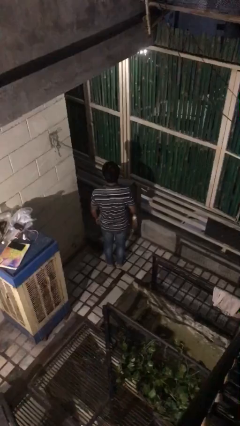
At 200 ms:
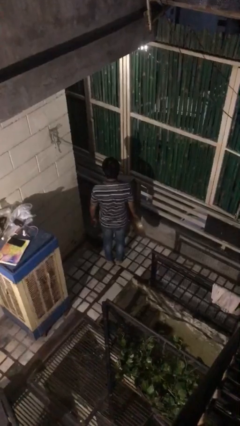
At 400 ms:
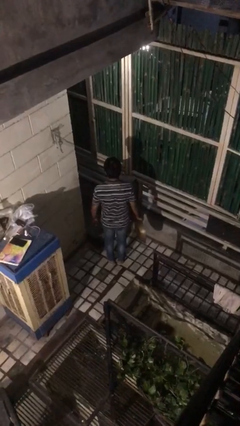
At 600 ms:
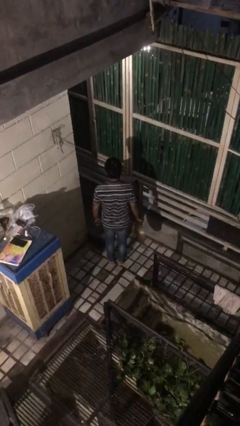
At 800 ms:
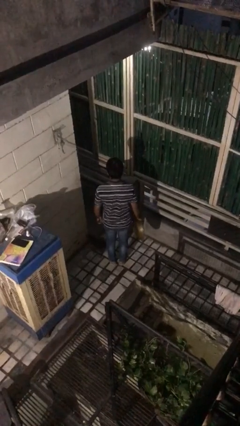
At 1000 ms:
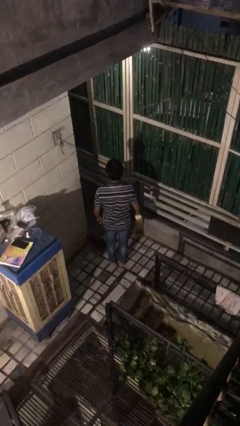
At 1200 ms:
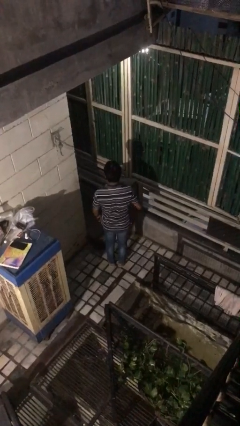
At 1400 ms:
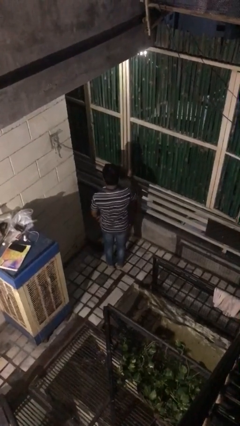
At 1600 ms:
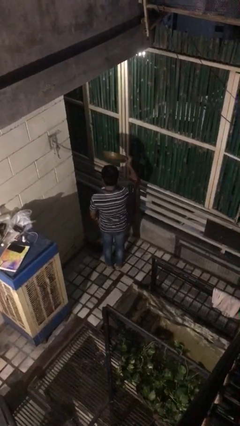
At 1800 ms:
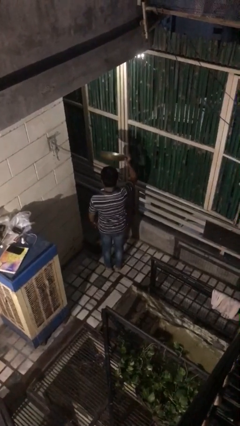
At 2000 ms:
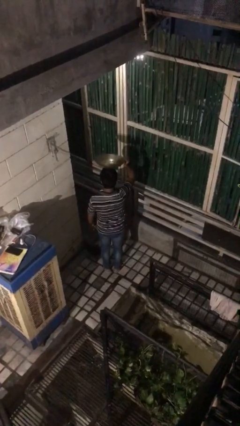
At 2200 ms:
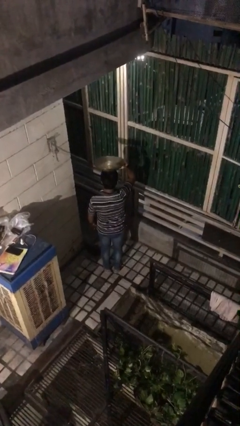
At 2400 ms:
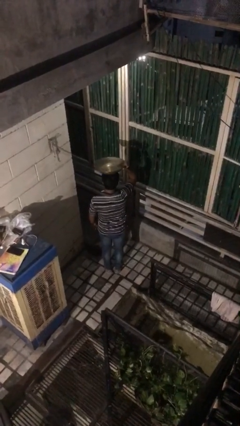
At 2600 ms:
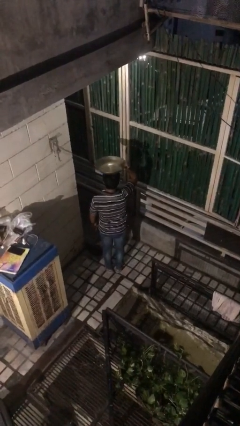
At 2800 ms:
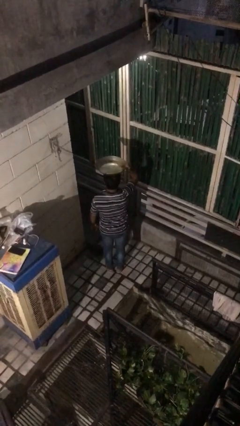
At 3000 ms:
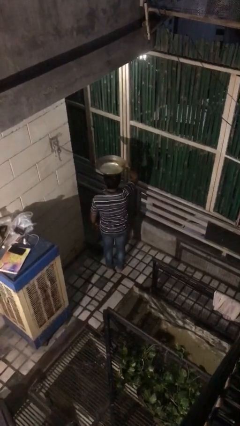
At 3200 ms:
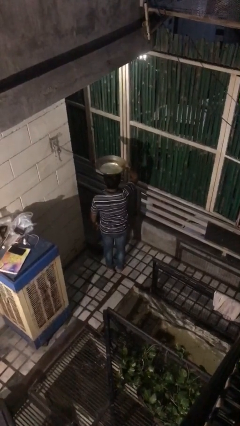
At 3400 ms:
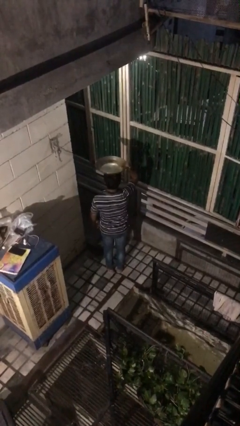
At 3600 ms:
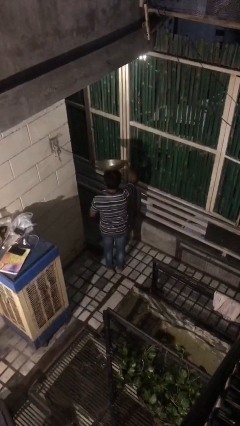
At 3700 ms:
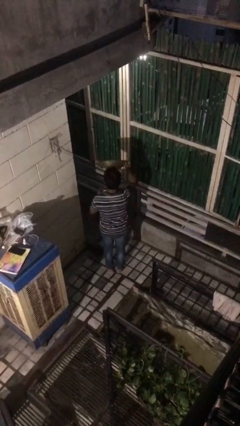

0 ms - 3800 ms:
person holds object above head

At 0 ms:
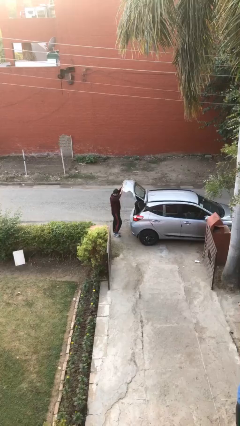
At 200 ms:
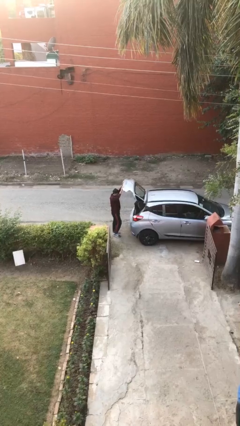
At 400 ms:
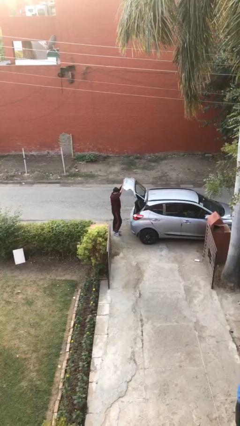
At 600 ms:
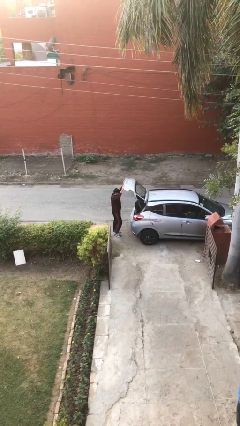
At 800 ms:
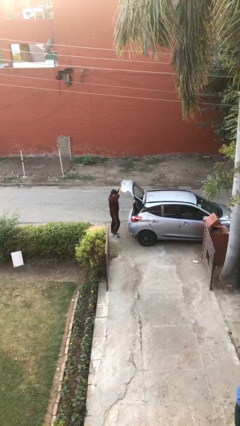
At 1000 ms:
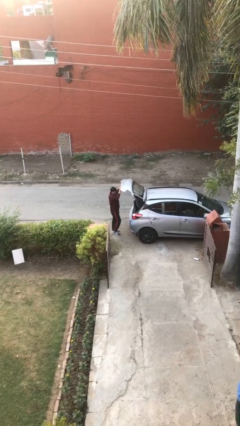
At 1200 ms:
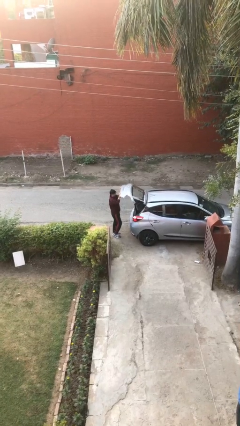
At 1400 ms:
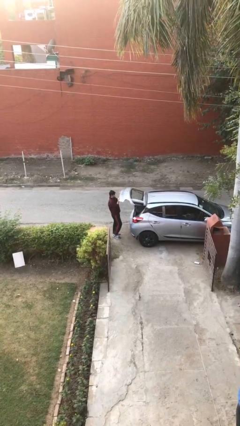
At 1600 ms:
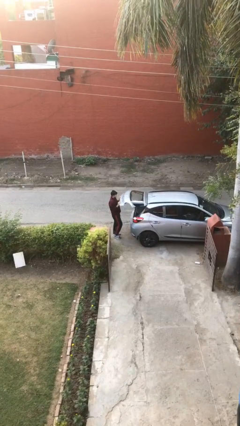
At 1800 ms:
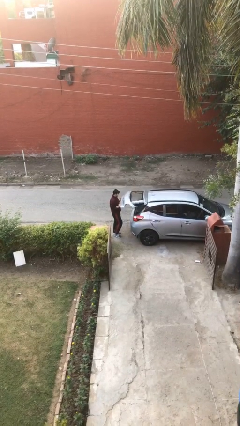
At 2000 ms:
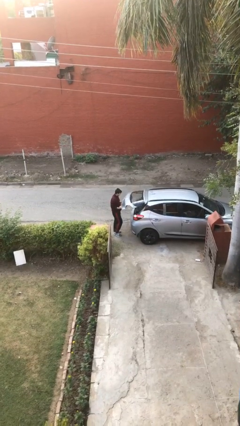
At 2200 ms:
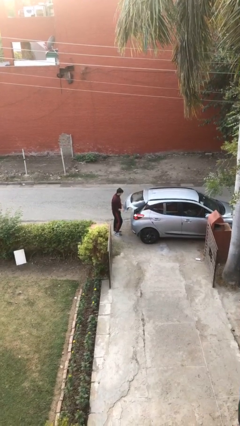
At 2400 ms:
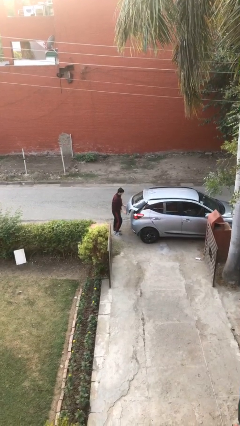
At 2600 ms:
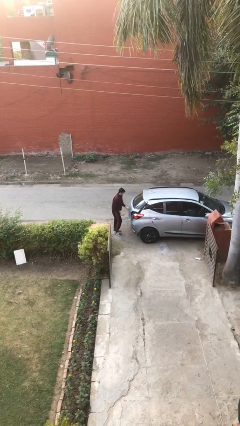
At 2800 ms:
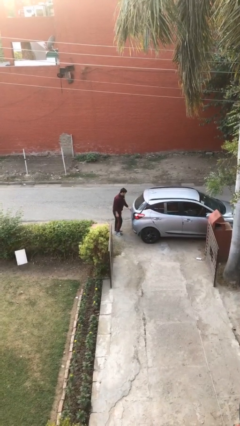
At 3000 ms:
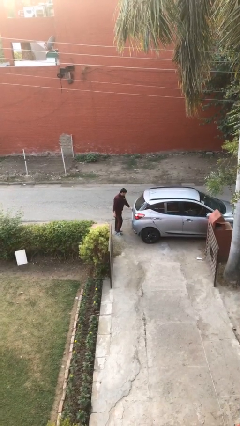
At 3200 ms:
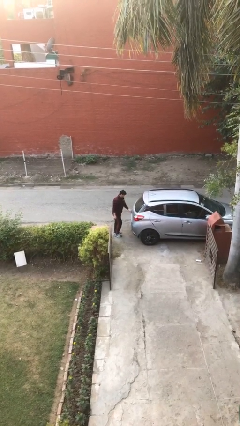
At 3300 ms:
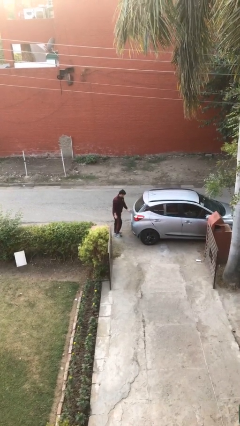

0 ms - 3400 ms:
person closes car trunk

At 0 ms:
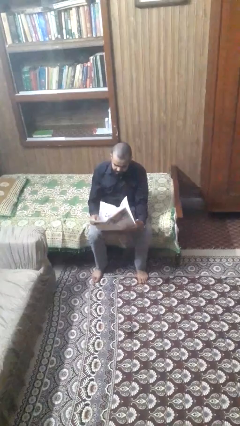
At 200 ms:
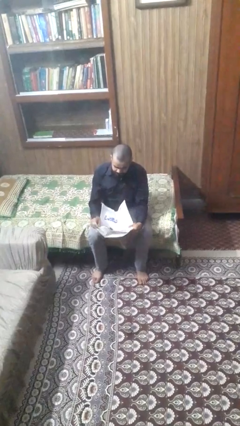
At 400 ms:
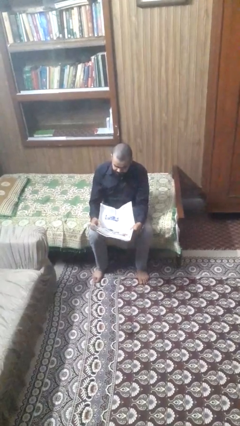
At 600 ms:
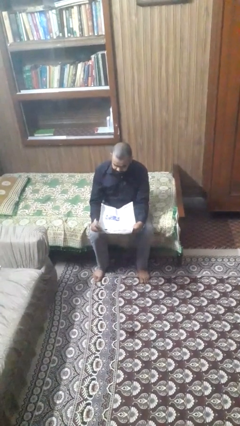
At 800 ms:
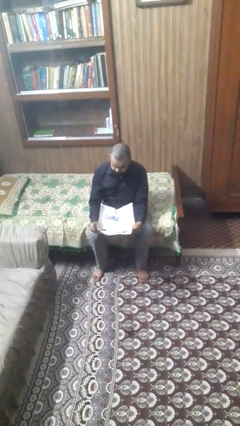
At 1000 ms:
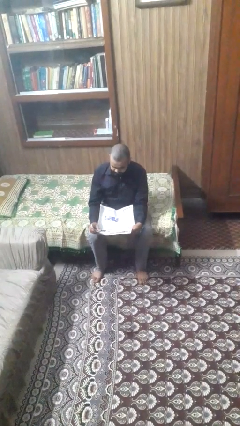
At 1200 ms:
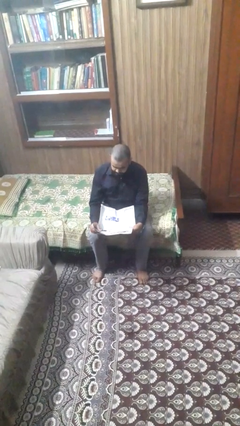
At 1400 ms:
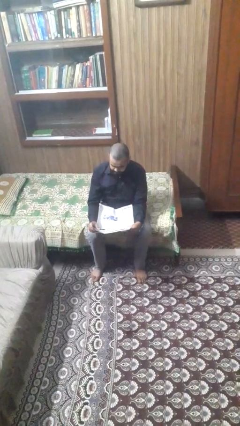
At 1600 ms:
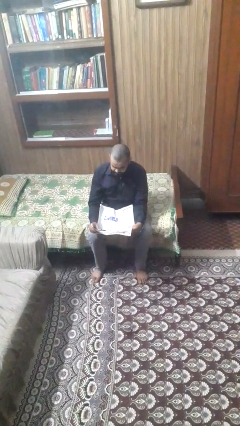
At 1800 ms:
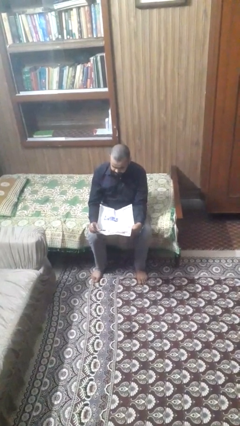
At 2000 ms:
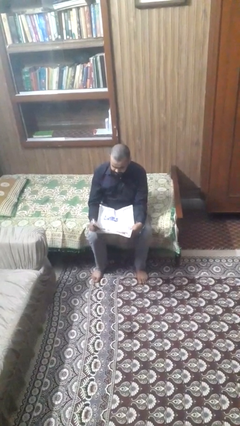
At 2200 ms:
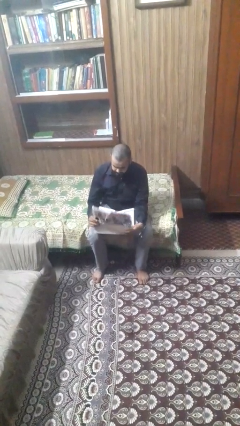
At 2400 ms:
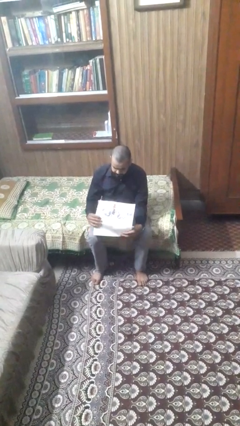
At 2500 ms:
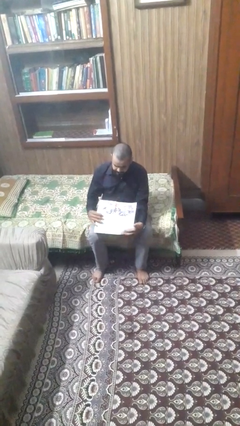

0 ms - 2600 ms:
person reads newspaper

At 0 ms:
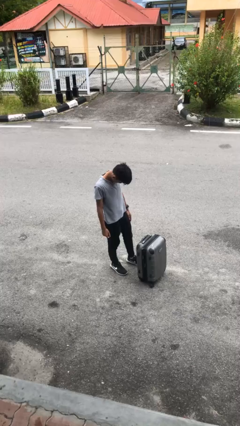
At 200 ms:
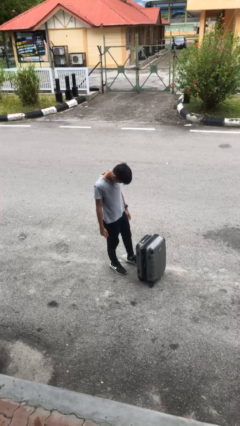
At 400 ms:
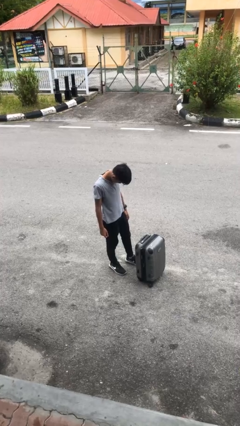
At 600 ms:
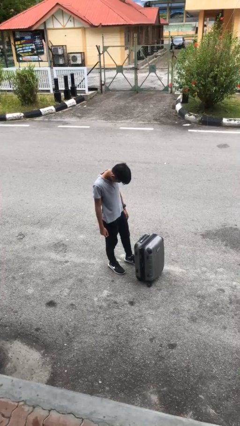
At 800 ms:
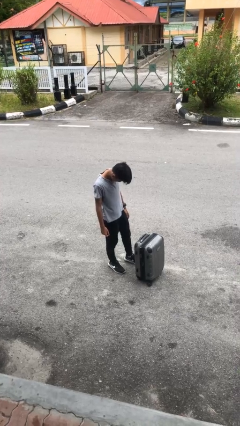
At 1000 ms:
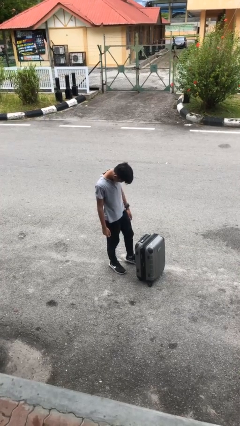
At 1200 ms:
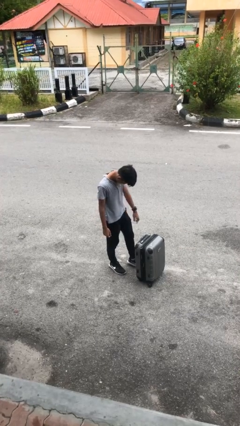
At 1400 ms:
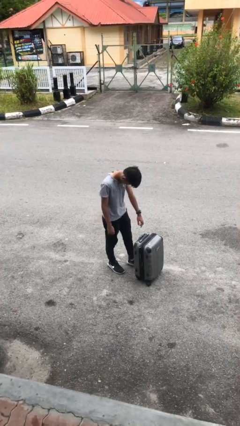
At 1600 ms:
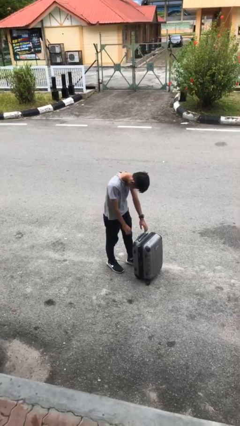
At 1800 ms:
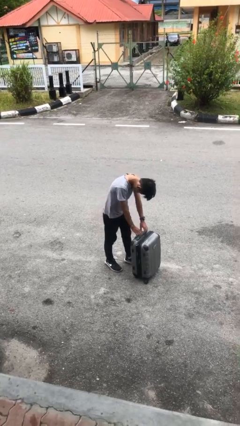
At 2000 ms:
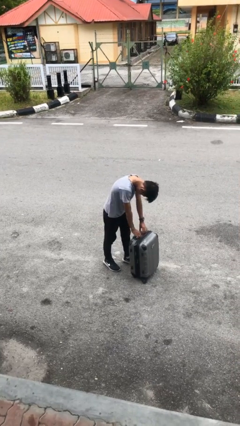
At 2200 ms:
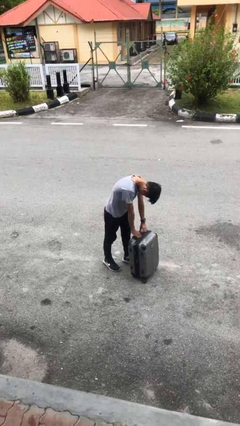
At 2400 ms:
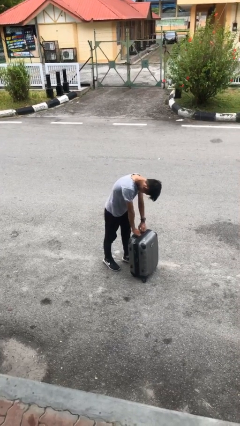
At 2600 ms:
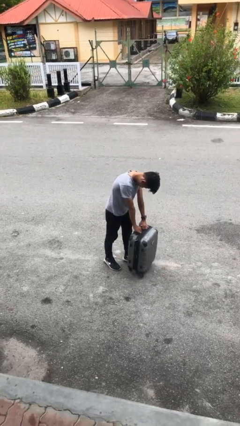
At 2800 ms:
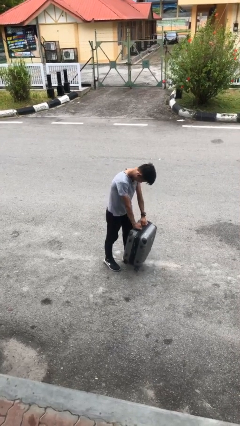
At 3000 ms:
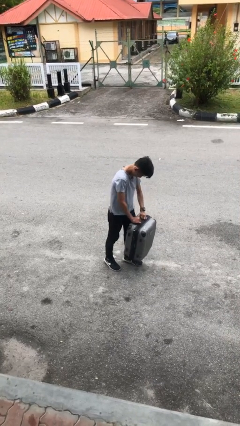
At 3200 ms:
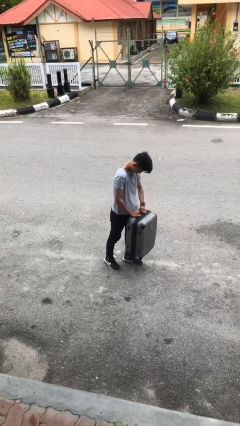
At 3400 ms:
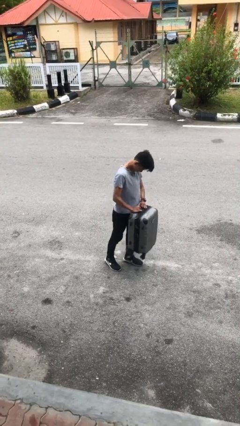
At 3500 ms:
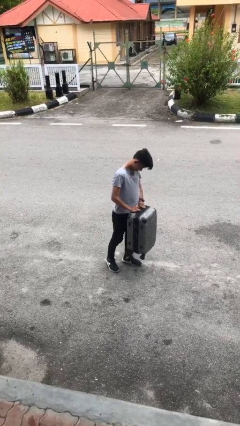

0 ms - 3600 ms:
person picks up object from floor

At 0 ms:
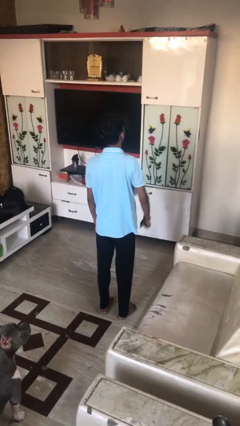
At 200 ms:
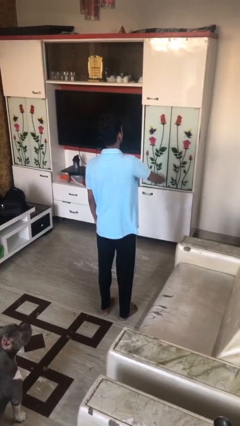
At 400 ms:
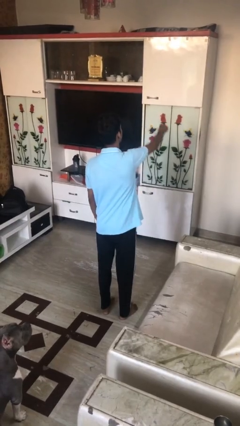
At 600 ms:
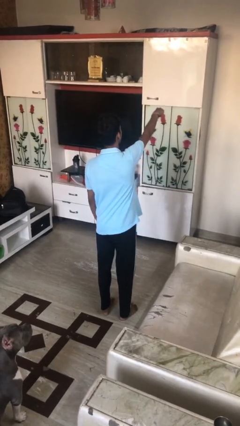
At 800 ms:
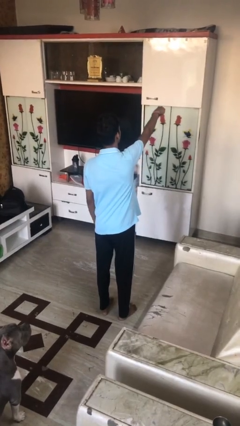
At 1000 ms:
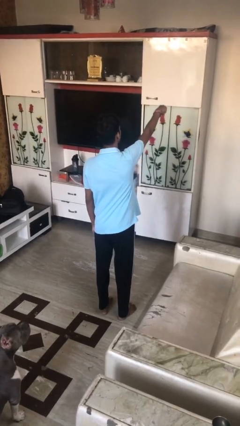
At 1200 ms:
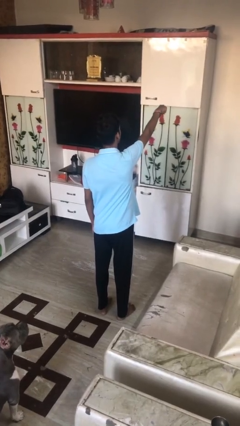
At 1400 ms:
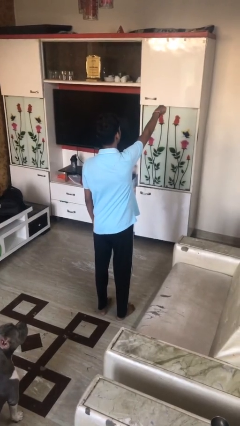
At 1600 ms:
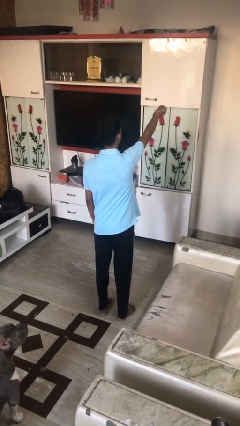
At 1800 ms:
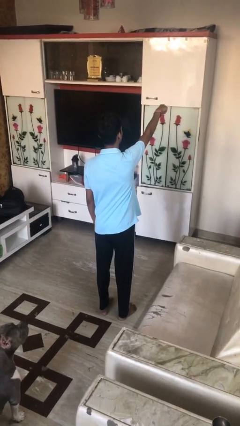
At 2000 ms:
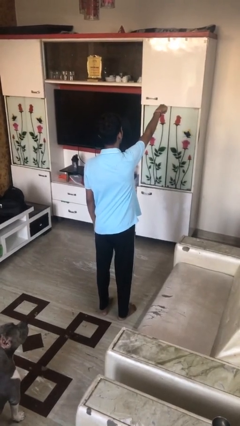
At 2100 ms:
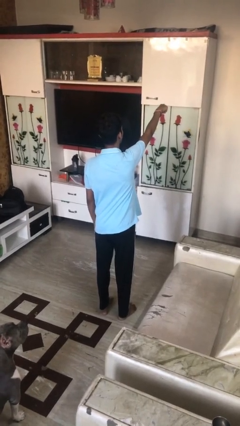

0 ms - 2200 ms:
person points at person

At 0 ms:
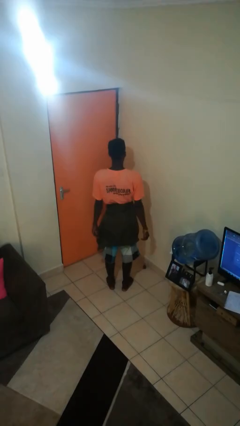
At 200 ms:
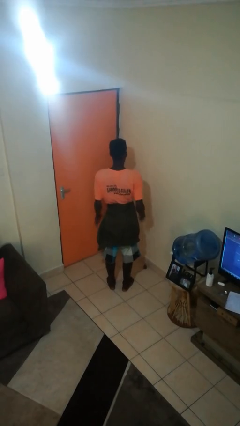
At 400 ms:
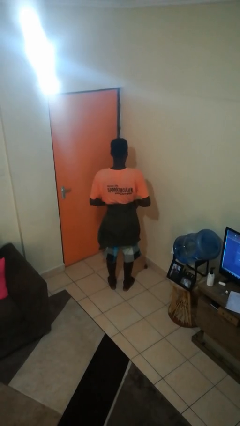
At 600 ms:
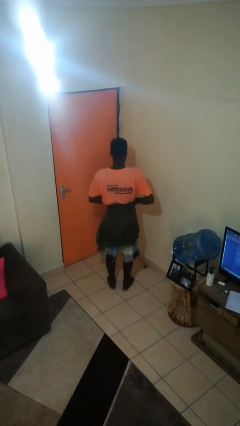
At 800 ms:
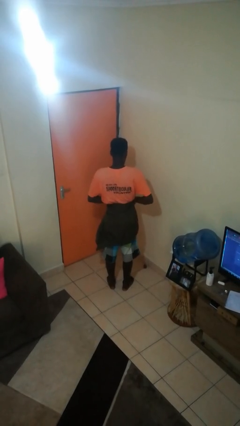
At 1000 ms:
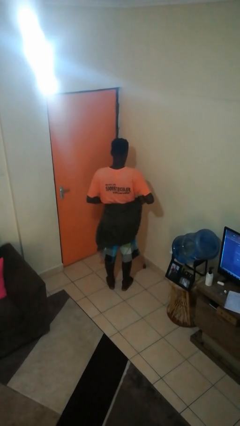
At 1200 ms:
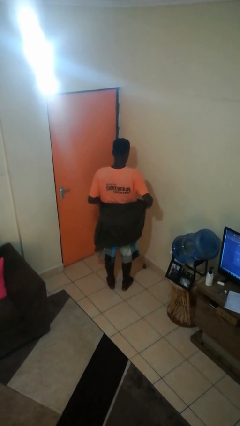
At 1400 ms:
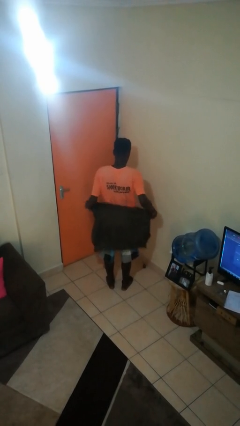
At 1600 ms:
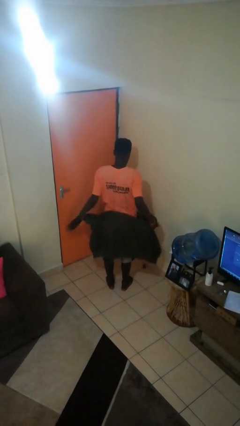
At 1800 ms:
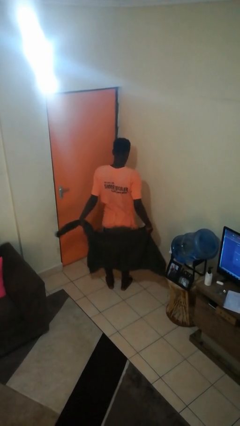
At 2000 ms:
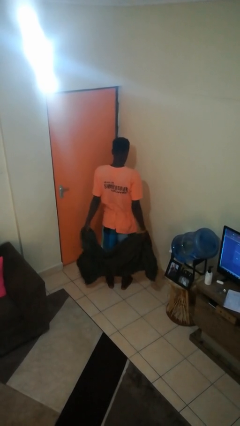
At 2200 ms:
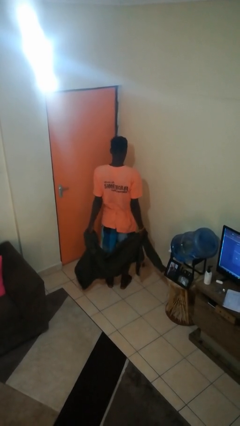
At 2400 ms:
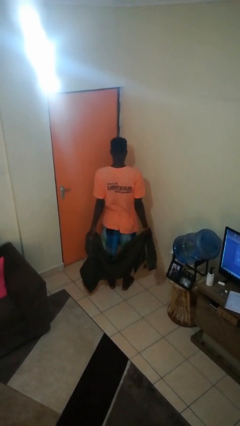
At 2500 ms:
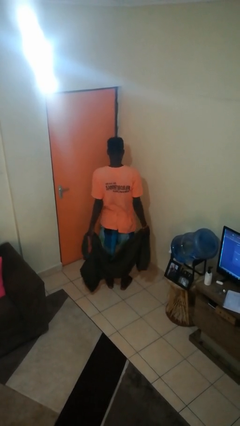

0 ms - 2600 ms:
person unties jacket around waist
